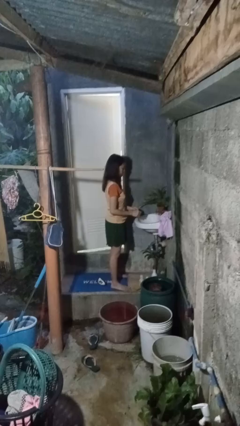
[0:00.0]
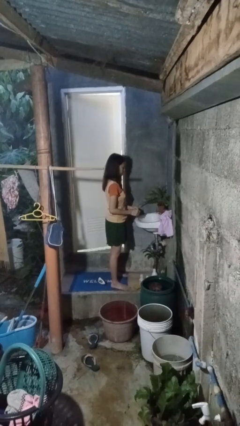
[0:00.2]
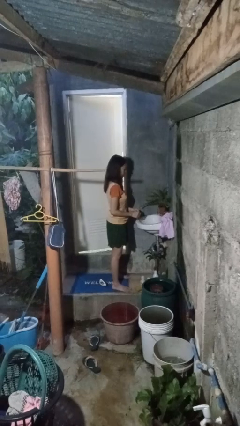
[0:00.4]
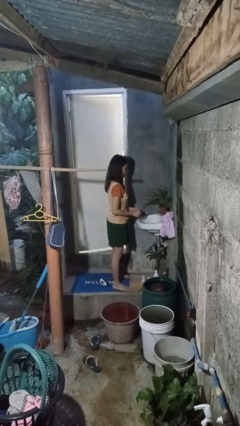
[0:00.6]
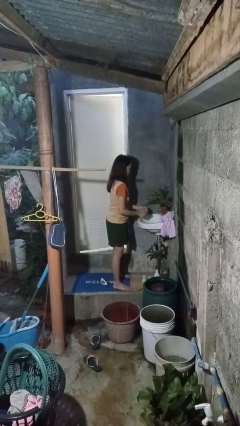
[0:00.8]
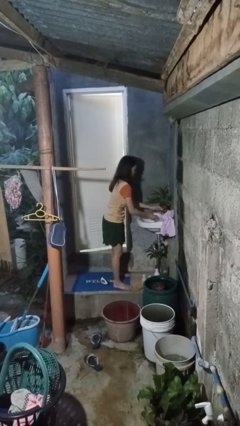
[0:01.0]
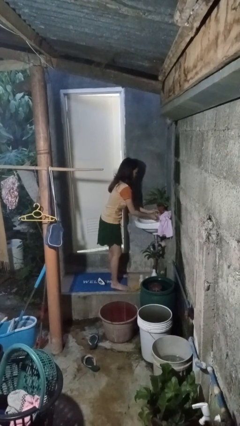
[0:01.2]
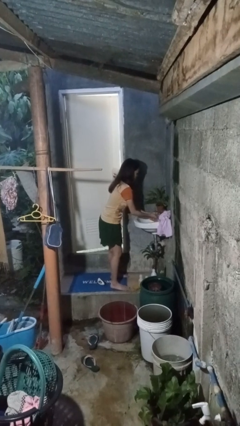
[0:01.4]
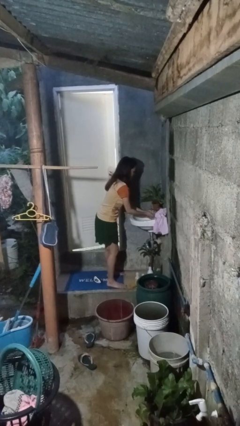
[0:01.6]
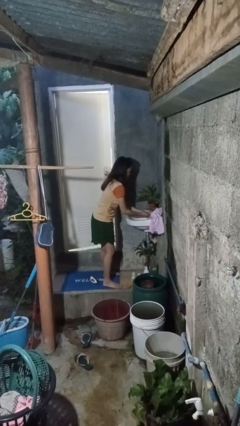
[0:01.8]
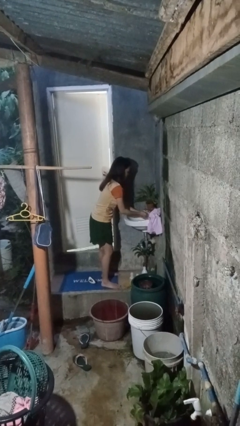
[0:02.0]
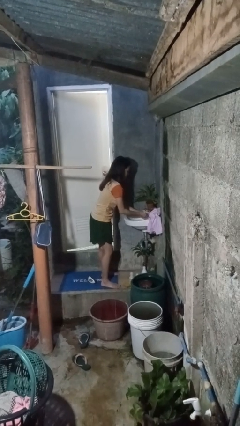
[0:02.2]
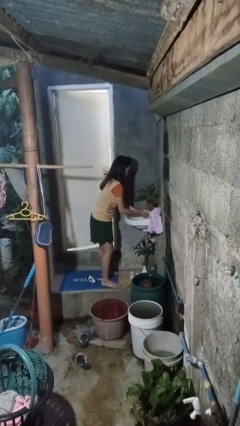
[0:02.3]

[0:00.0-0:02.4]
person washes hands

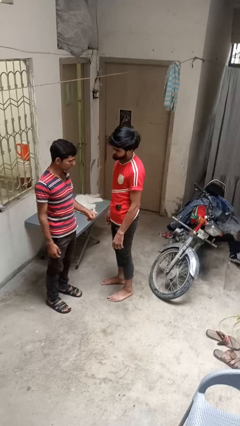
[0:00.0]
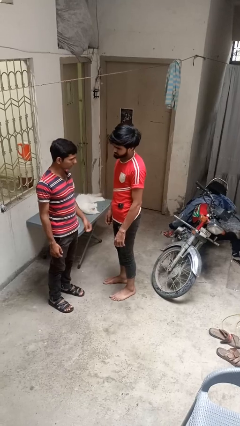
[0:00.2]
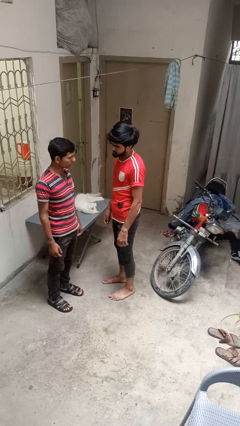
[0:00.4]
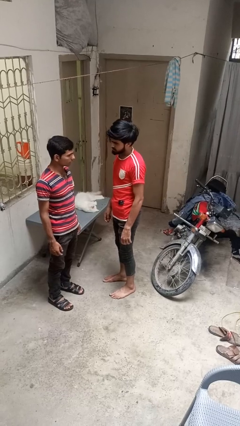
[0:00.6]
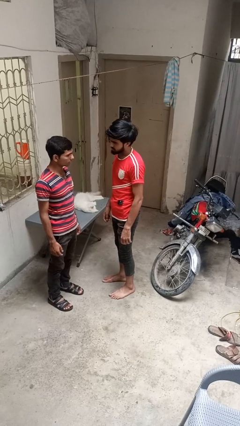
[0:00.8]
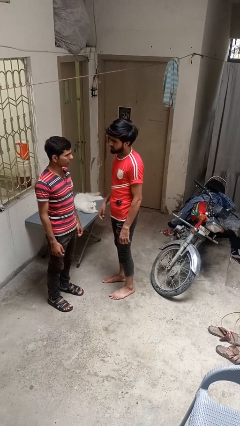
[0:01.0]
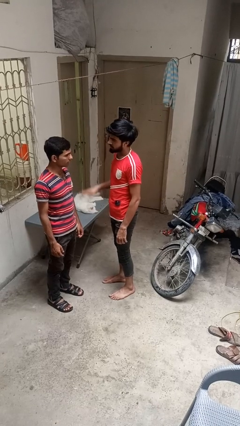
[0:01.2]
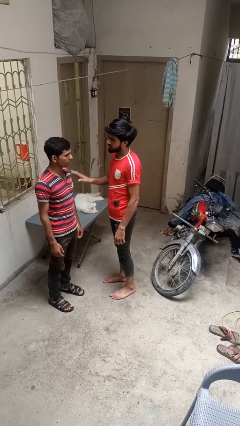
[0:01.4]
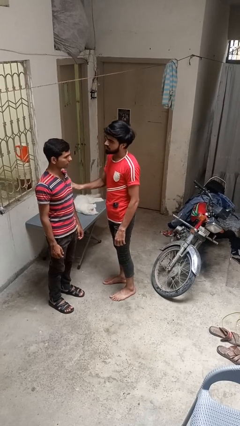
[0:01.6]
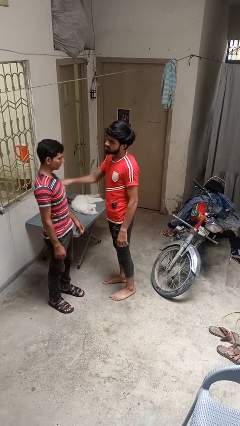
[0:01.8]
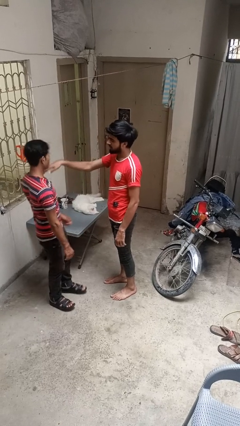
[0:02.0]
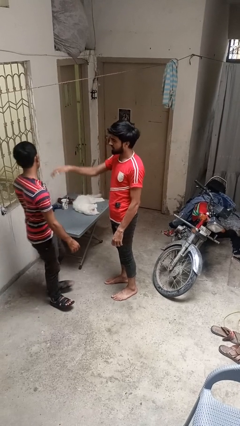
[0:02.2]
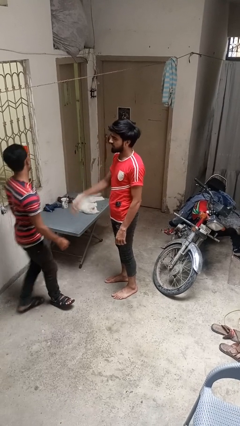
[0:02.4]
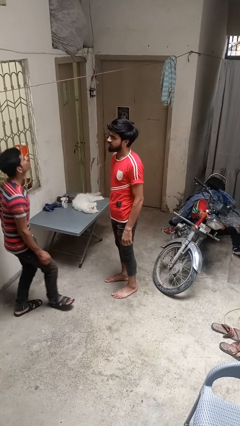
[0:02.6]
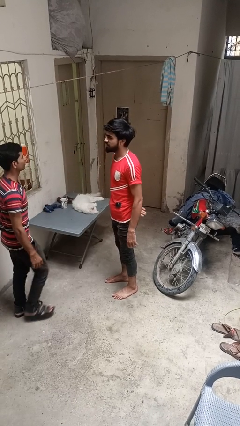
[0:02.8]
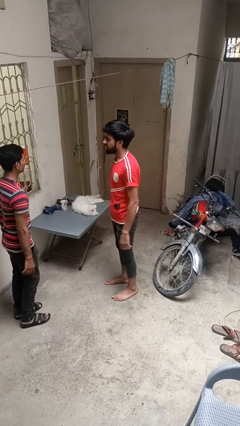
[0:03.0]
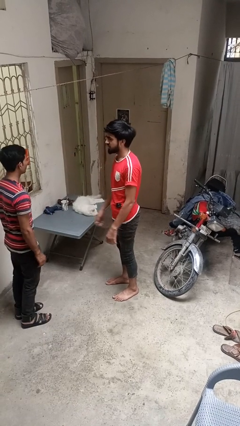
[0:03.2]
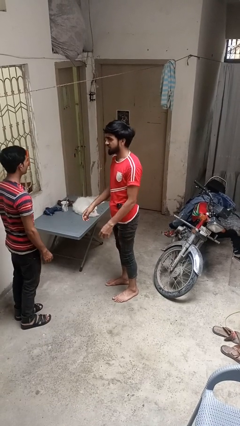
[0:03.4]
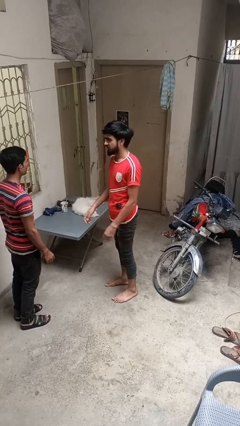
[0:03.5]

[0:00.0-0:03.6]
person shoves person

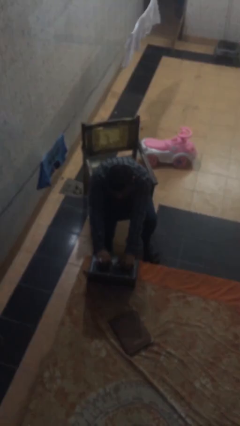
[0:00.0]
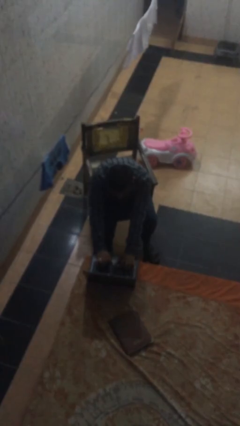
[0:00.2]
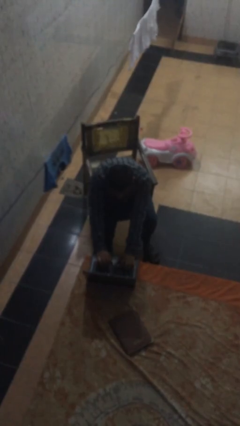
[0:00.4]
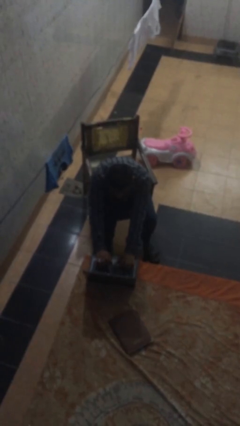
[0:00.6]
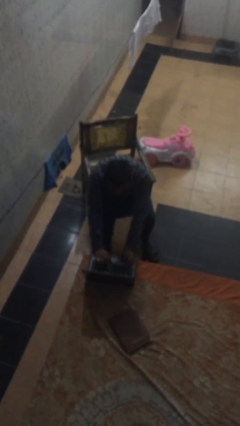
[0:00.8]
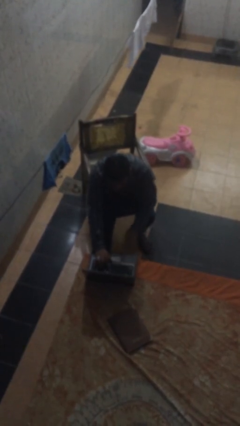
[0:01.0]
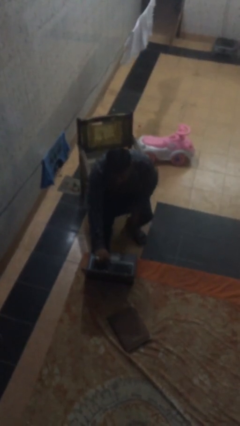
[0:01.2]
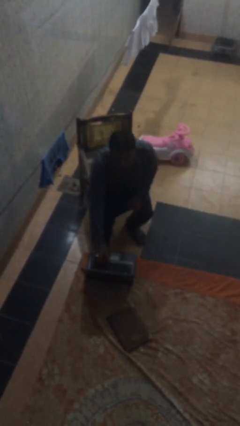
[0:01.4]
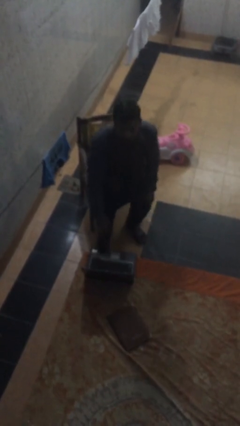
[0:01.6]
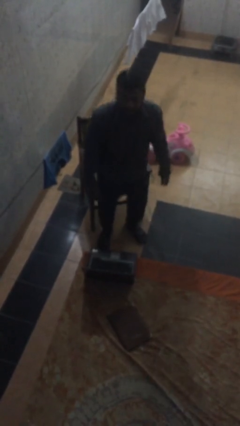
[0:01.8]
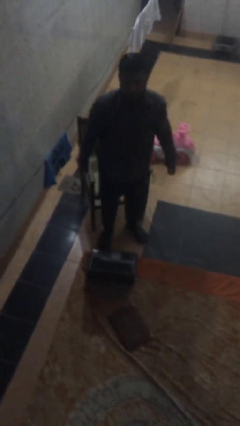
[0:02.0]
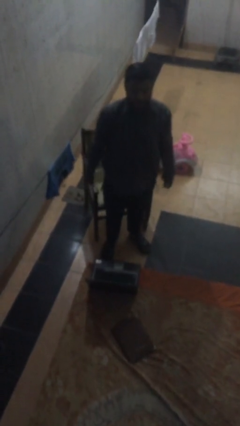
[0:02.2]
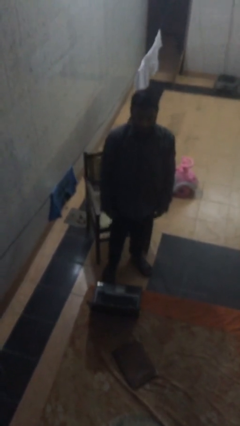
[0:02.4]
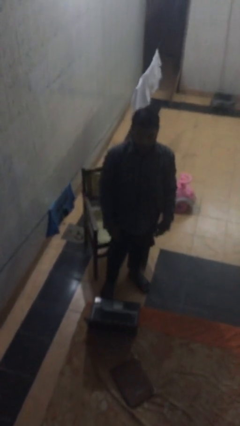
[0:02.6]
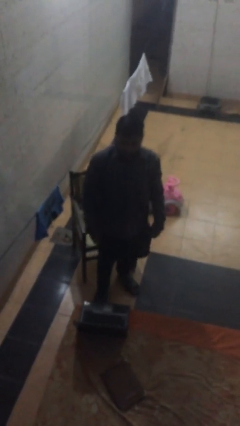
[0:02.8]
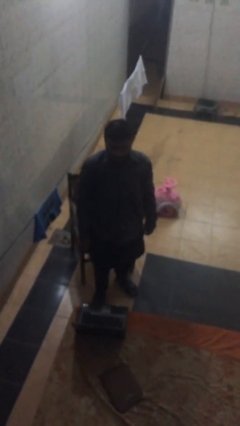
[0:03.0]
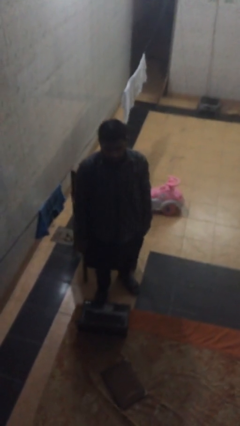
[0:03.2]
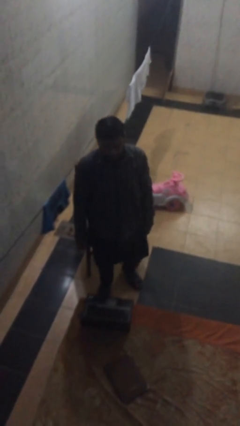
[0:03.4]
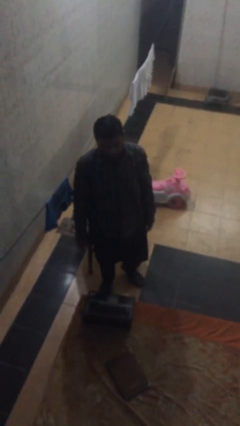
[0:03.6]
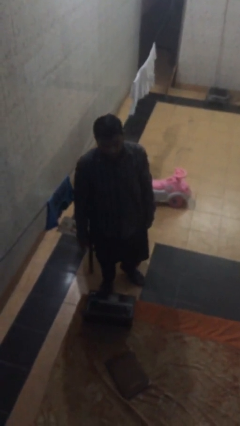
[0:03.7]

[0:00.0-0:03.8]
person stands up

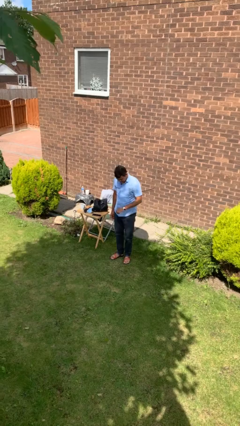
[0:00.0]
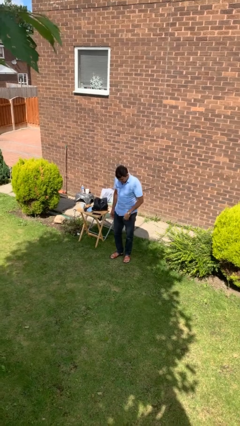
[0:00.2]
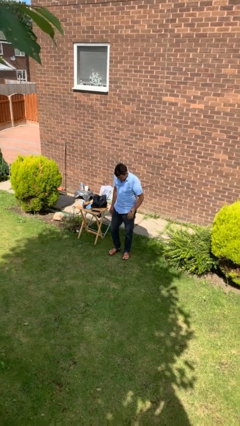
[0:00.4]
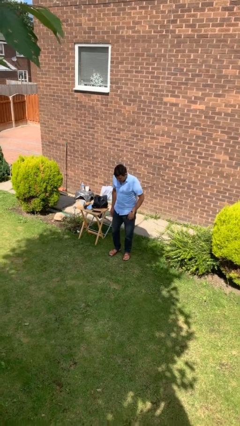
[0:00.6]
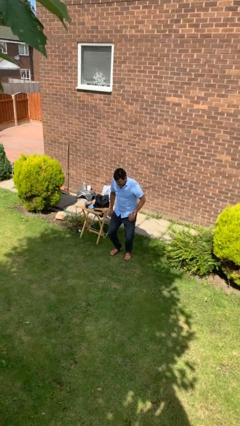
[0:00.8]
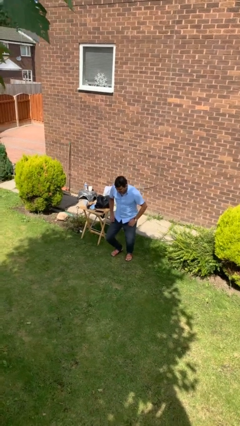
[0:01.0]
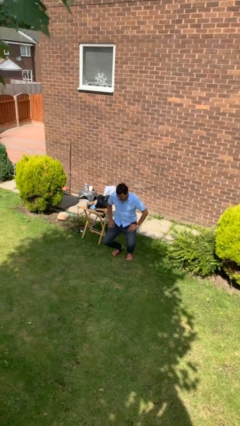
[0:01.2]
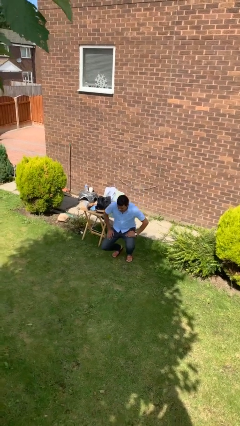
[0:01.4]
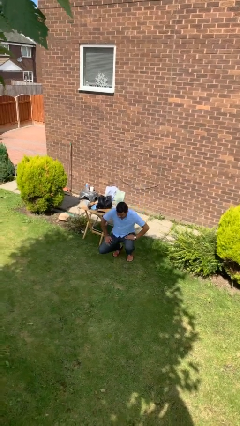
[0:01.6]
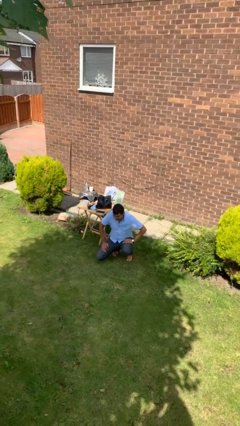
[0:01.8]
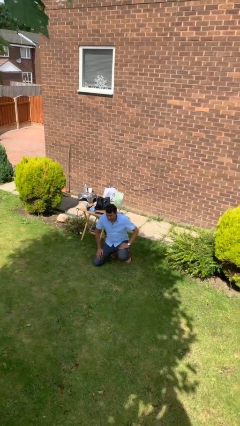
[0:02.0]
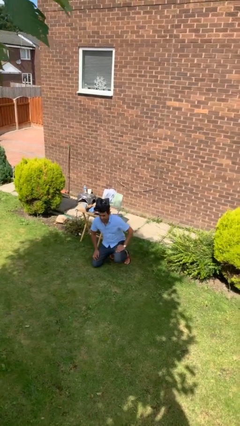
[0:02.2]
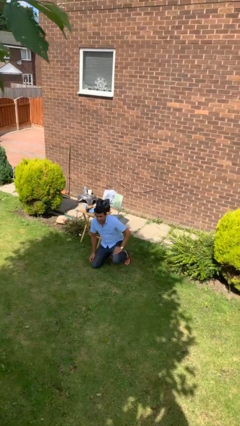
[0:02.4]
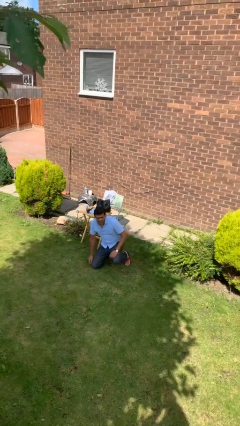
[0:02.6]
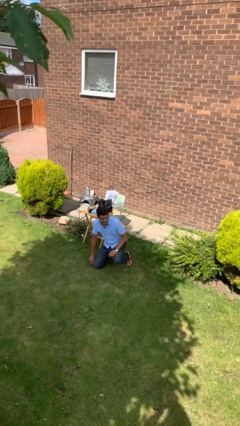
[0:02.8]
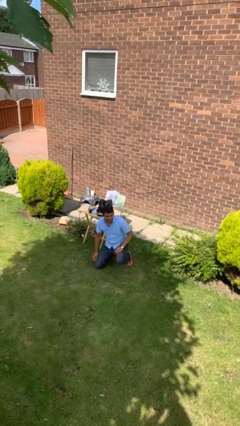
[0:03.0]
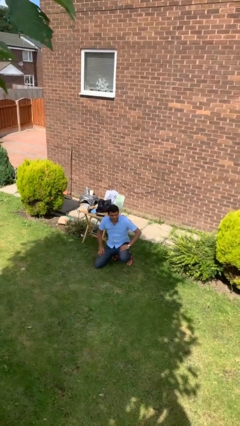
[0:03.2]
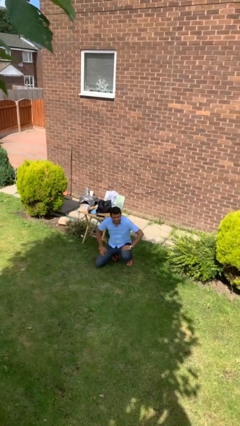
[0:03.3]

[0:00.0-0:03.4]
person kneels

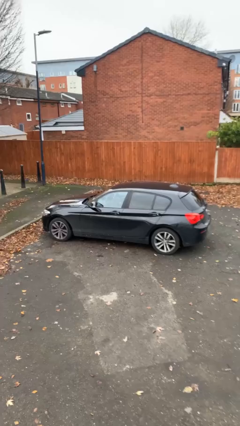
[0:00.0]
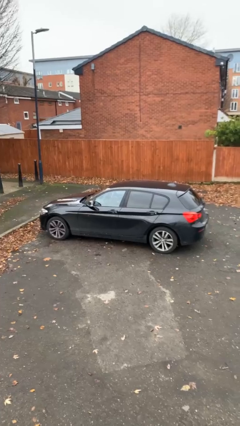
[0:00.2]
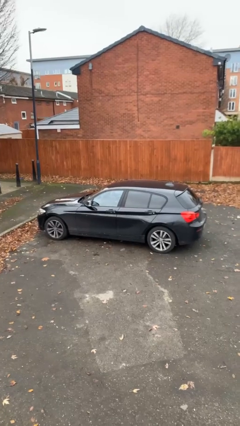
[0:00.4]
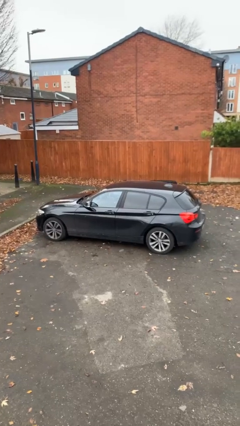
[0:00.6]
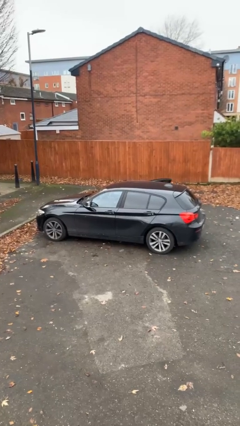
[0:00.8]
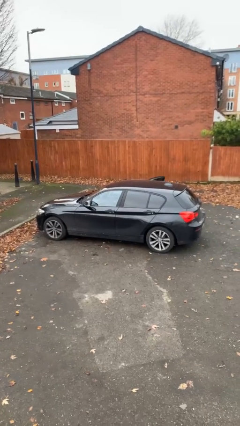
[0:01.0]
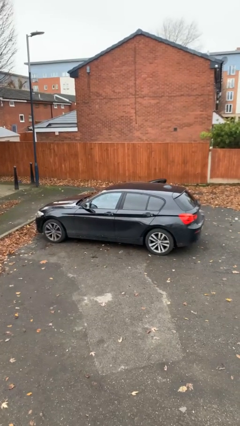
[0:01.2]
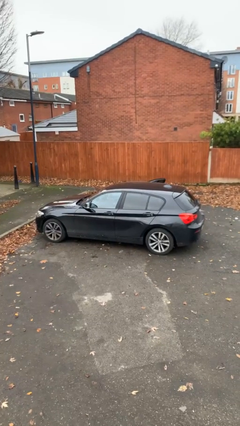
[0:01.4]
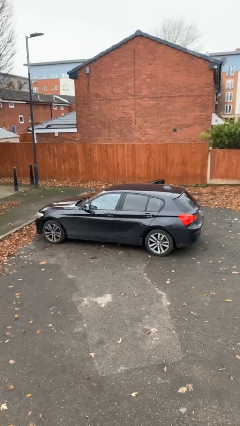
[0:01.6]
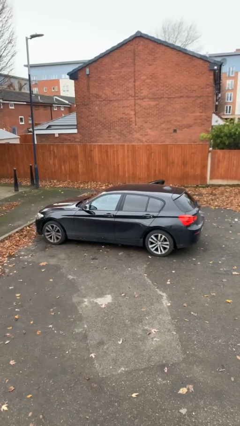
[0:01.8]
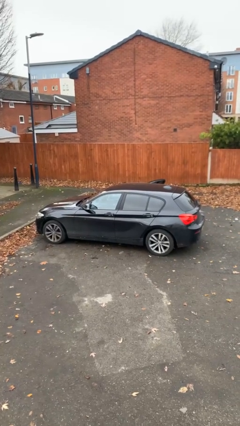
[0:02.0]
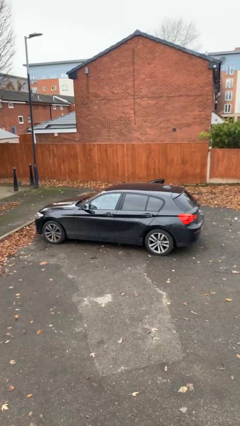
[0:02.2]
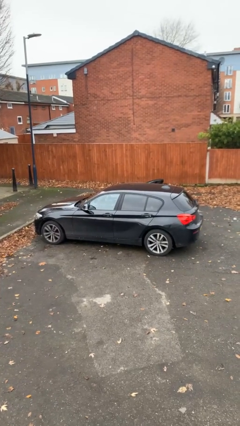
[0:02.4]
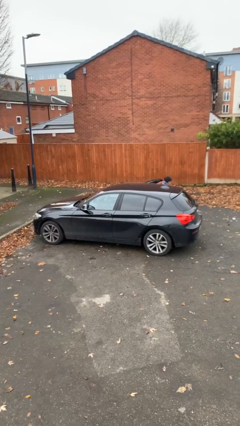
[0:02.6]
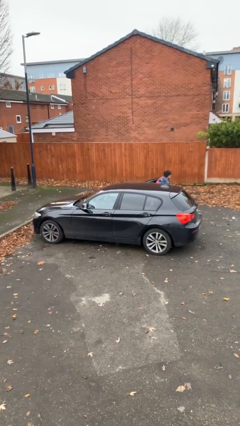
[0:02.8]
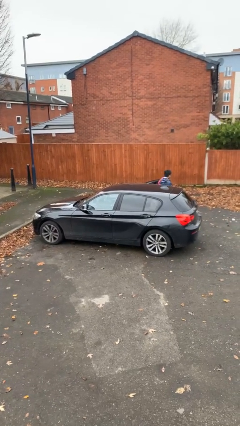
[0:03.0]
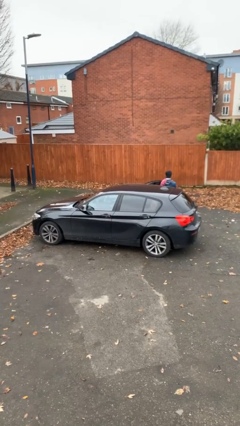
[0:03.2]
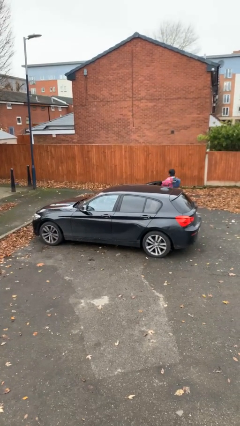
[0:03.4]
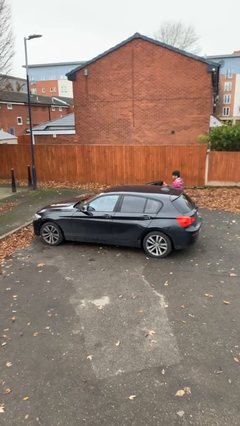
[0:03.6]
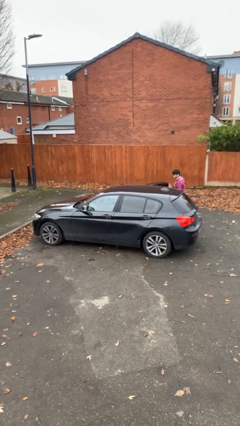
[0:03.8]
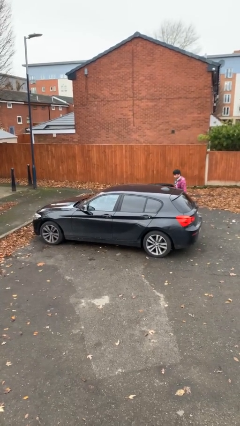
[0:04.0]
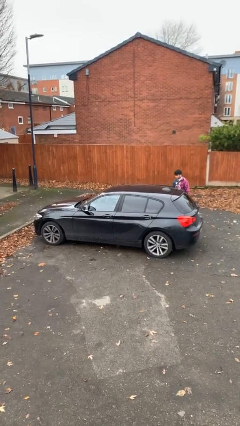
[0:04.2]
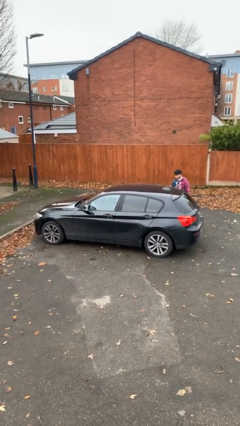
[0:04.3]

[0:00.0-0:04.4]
car drops off person
